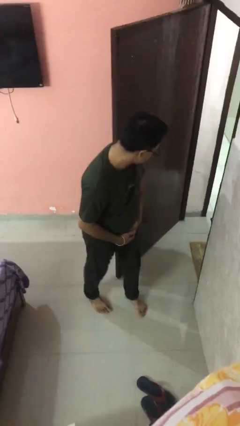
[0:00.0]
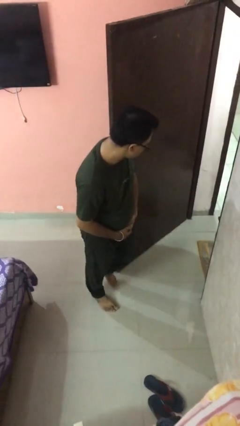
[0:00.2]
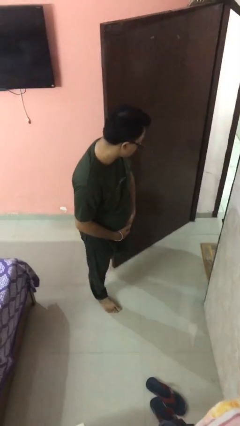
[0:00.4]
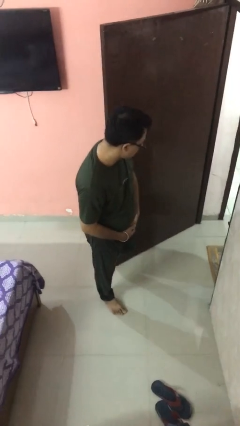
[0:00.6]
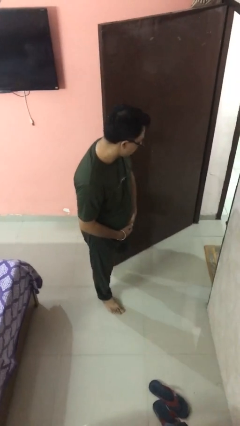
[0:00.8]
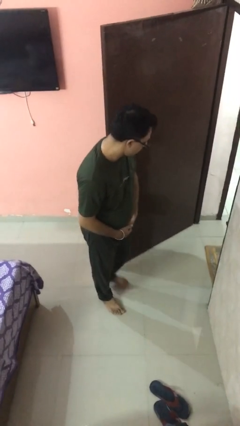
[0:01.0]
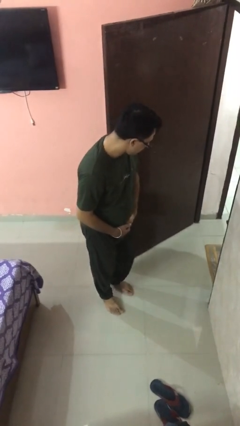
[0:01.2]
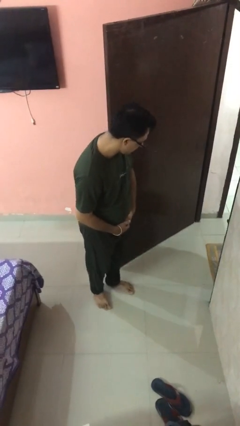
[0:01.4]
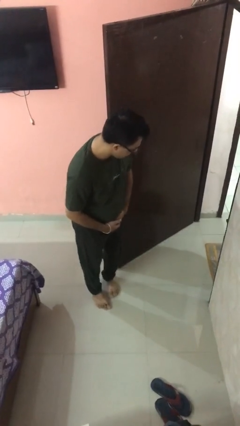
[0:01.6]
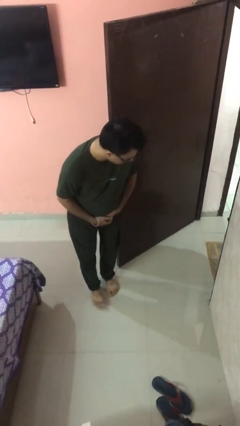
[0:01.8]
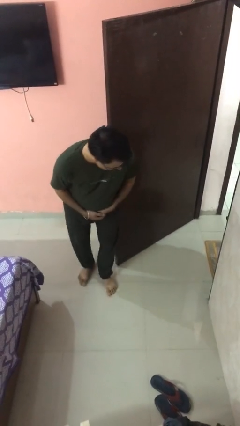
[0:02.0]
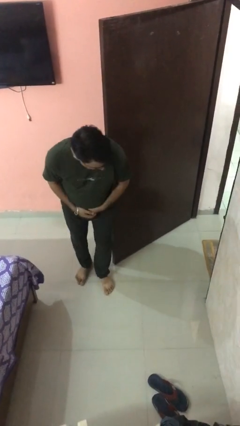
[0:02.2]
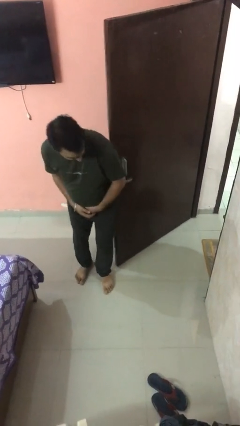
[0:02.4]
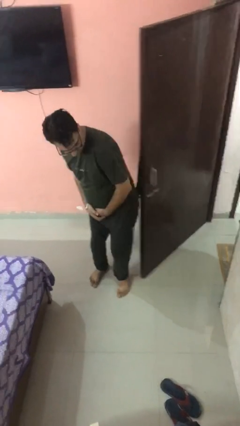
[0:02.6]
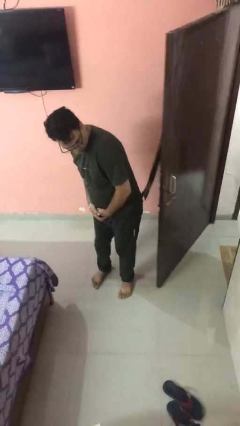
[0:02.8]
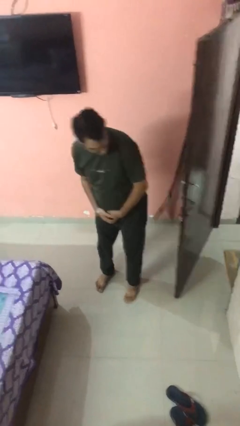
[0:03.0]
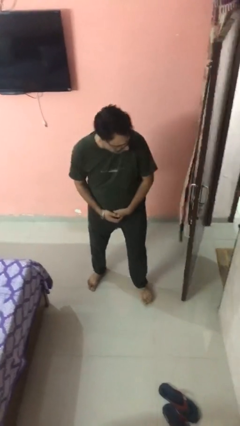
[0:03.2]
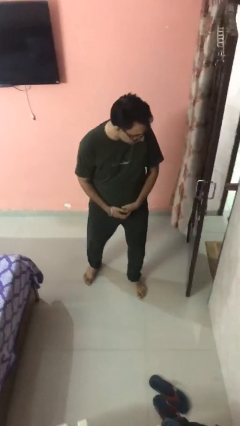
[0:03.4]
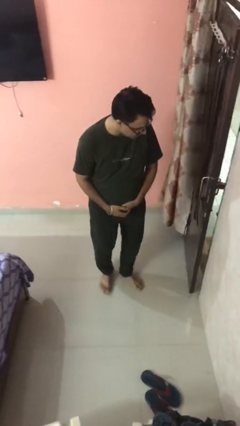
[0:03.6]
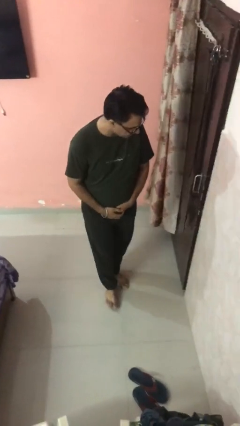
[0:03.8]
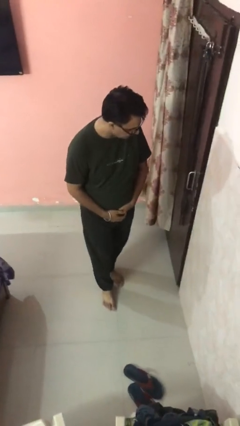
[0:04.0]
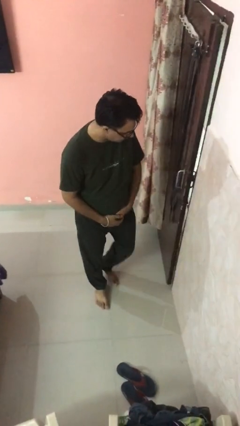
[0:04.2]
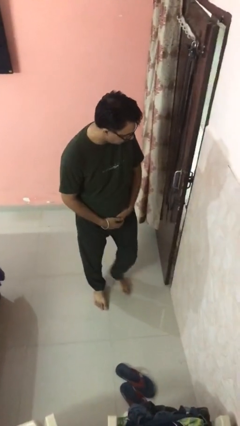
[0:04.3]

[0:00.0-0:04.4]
person closes door with hip

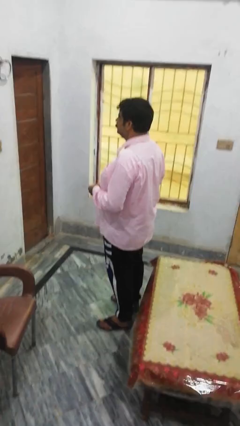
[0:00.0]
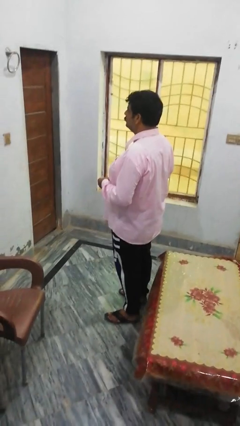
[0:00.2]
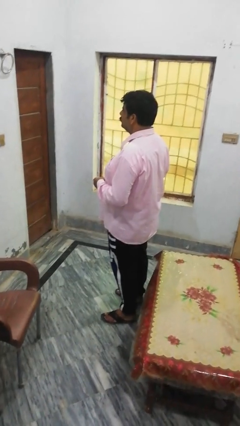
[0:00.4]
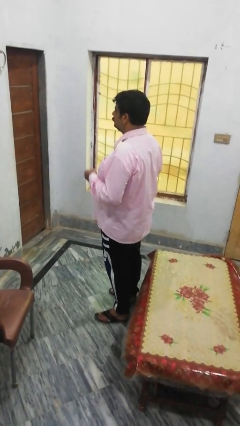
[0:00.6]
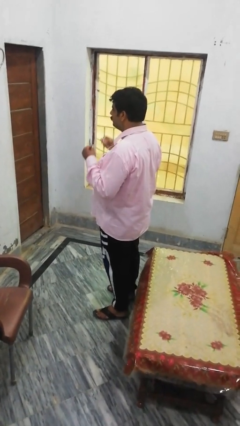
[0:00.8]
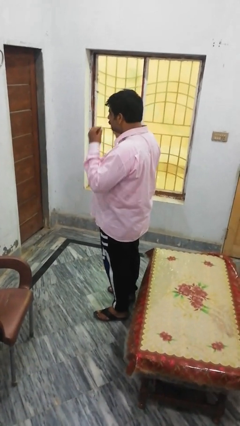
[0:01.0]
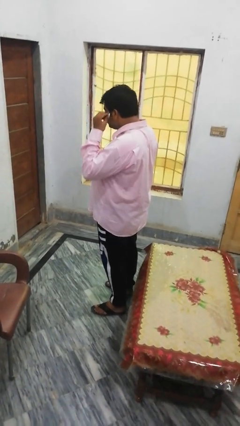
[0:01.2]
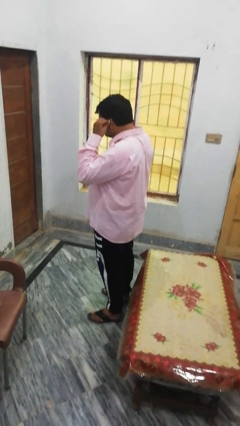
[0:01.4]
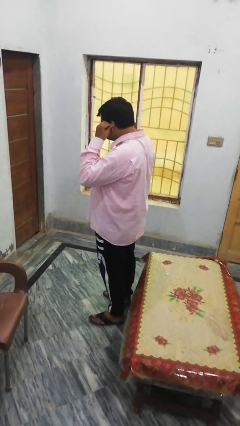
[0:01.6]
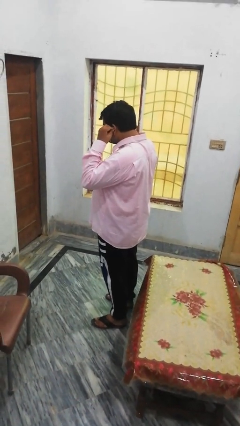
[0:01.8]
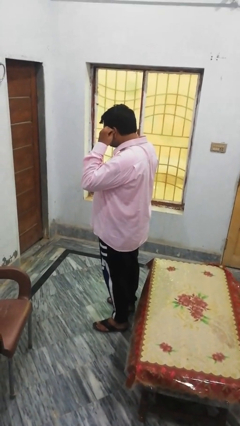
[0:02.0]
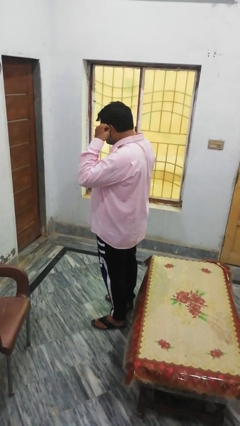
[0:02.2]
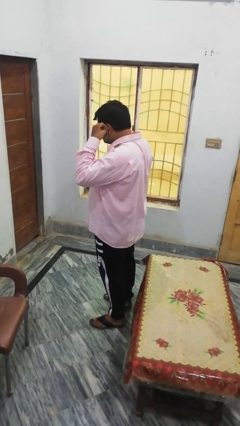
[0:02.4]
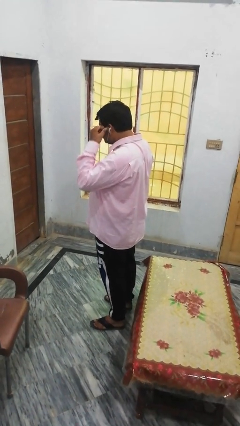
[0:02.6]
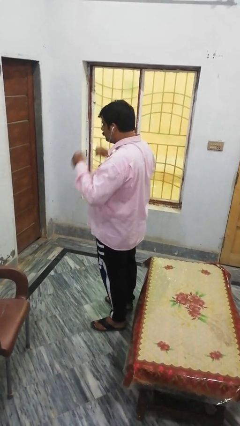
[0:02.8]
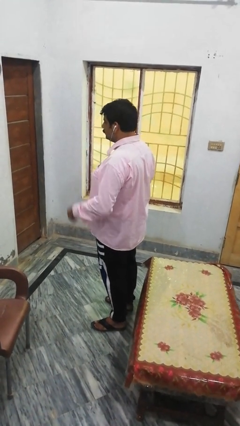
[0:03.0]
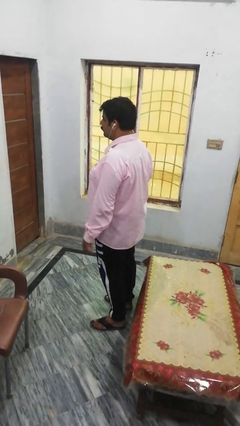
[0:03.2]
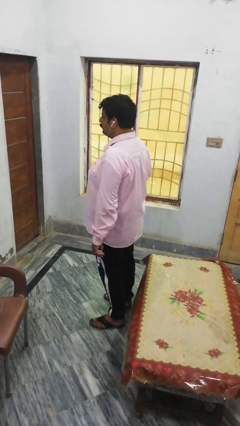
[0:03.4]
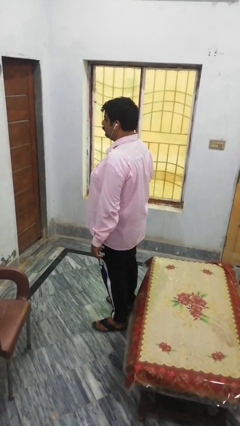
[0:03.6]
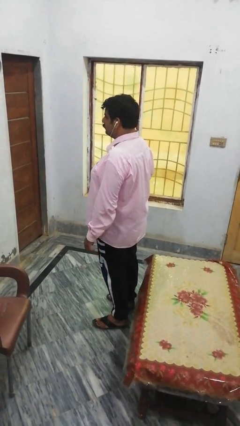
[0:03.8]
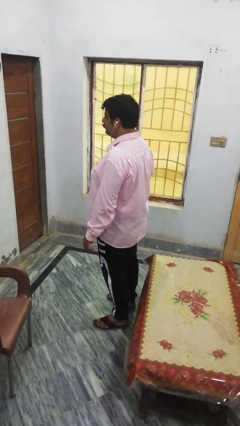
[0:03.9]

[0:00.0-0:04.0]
person puts on headphones

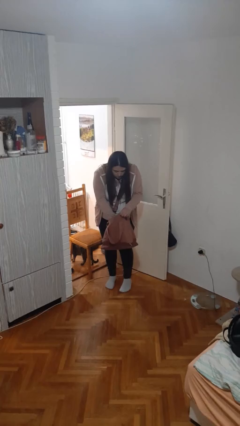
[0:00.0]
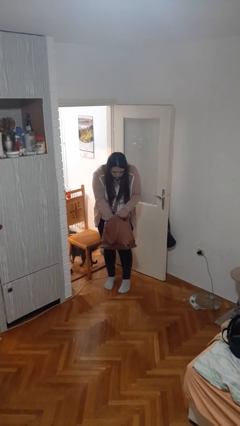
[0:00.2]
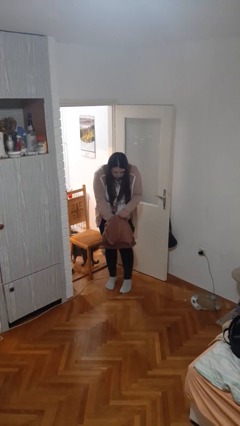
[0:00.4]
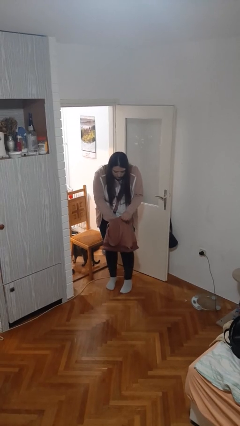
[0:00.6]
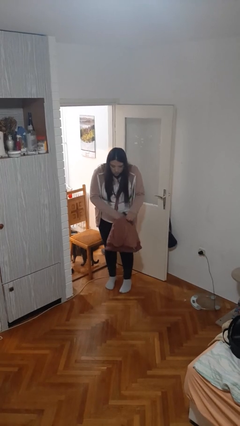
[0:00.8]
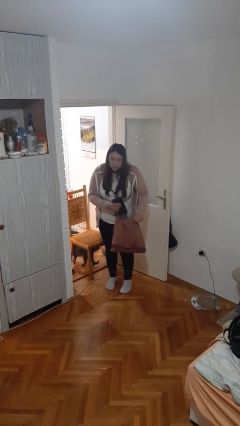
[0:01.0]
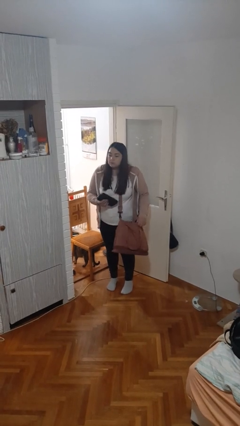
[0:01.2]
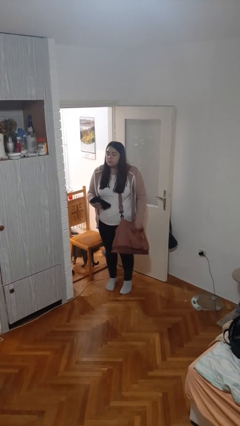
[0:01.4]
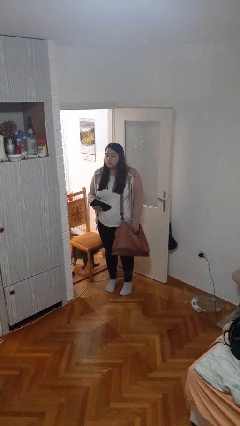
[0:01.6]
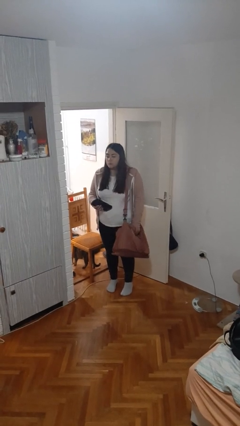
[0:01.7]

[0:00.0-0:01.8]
person takes object from purse

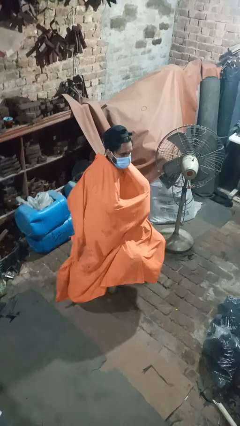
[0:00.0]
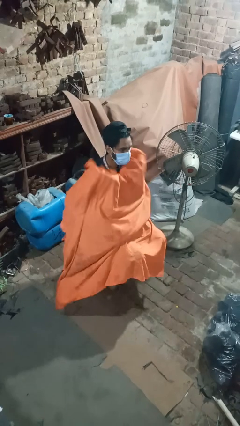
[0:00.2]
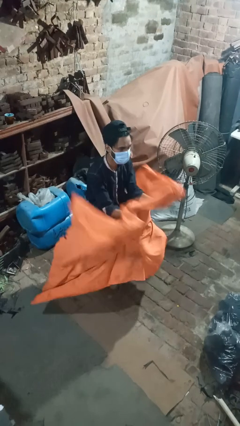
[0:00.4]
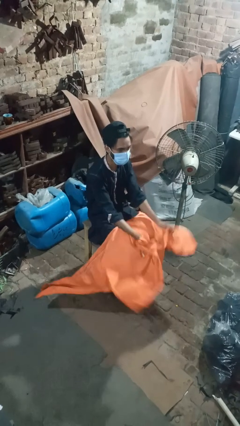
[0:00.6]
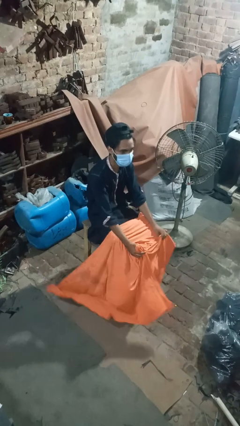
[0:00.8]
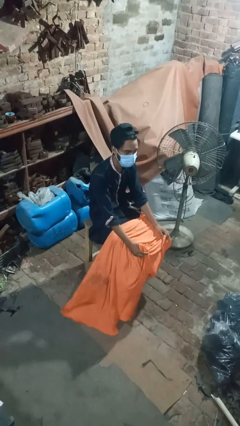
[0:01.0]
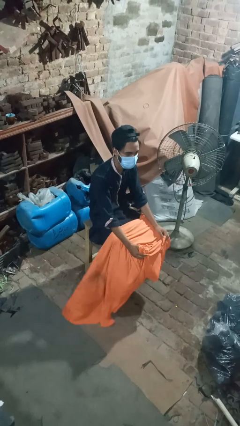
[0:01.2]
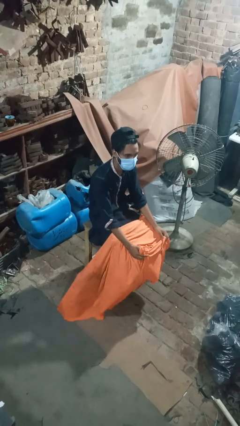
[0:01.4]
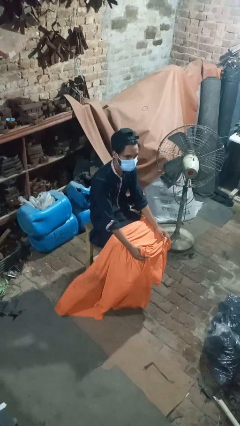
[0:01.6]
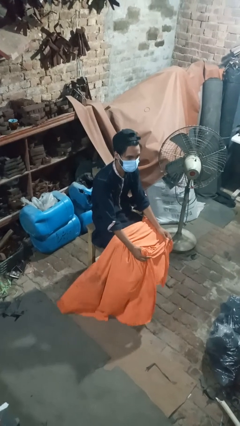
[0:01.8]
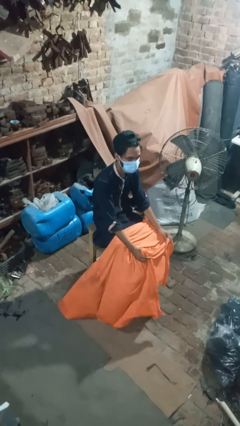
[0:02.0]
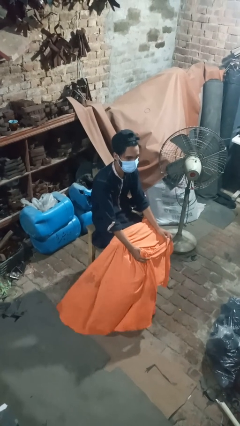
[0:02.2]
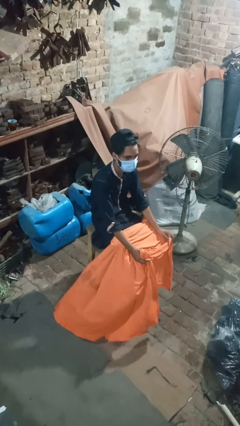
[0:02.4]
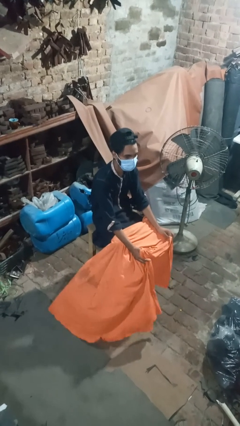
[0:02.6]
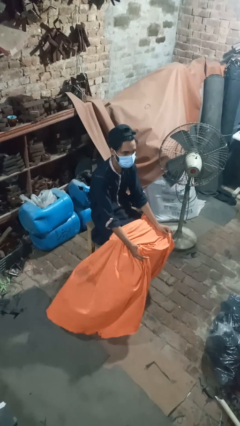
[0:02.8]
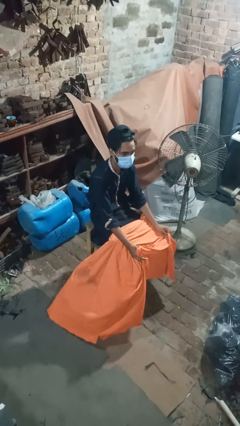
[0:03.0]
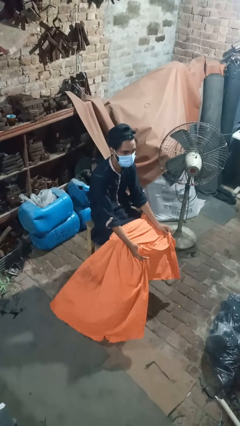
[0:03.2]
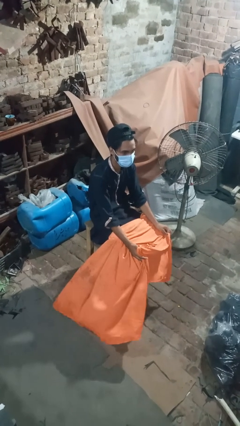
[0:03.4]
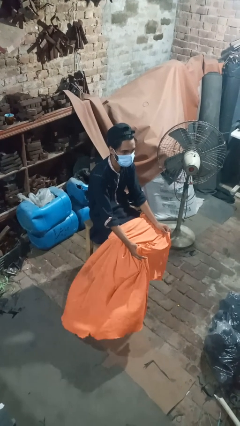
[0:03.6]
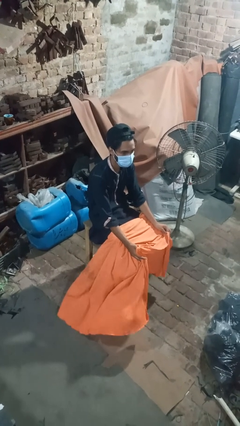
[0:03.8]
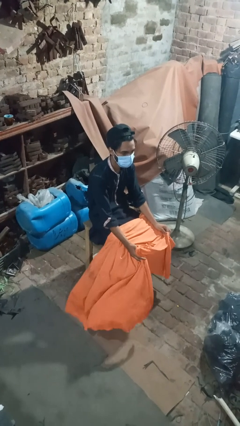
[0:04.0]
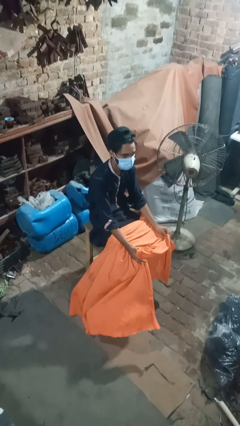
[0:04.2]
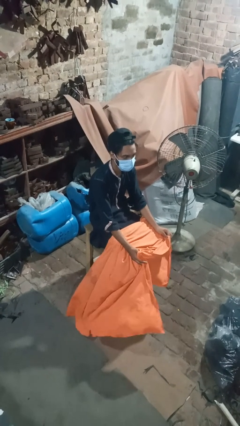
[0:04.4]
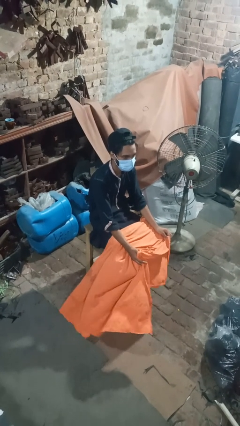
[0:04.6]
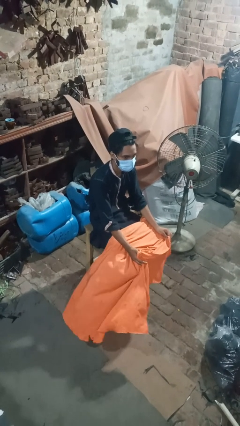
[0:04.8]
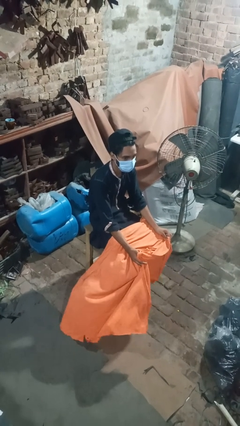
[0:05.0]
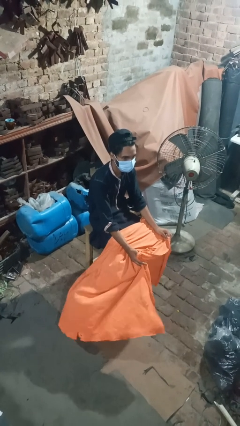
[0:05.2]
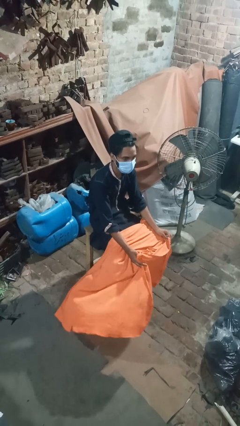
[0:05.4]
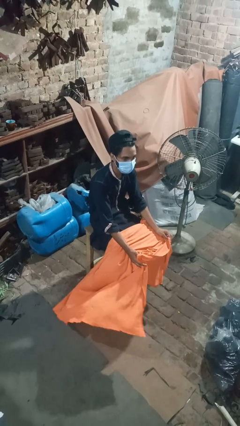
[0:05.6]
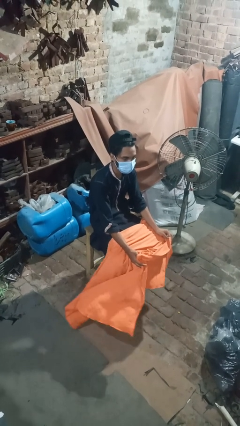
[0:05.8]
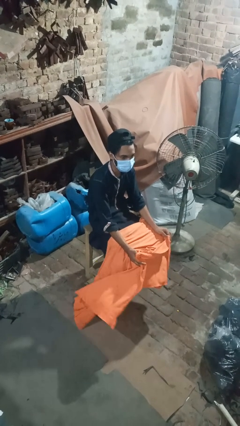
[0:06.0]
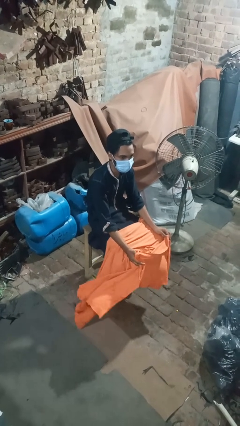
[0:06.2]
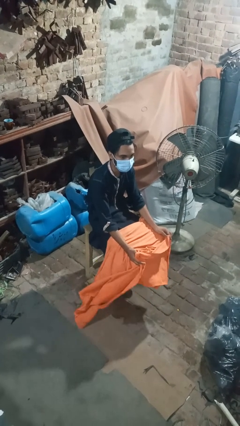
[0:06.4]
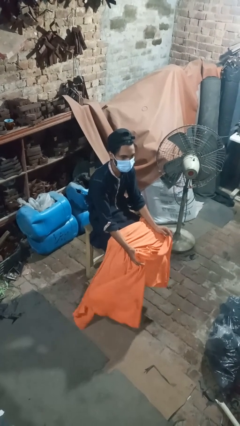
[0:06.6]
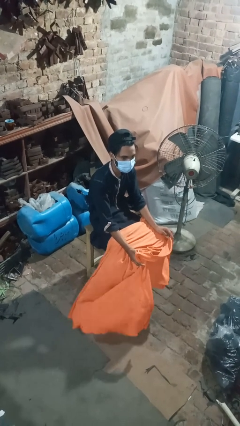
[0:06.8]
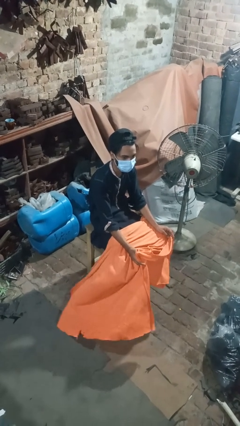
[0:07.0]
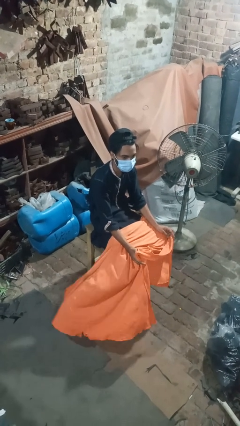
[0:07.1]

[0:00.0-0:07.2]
person uncovers with blanket

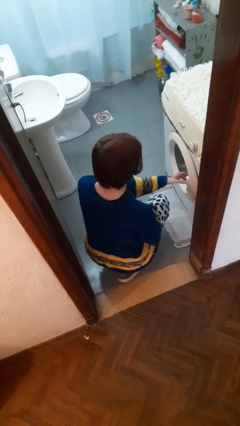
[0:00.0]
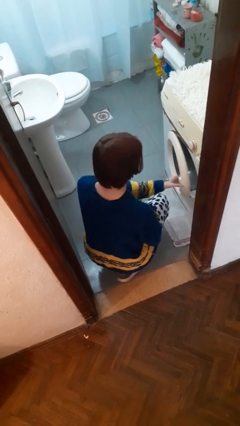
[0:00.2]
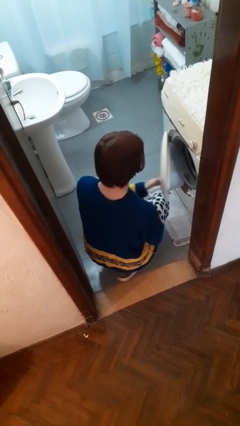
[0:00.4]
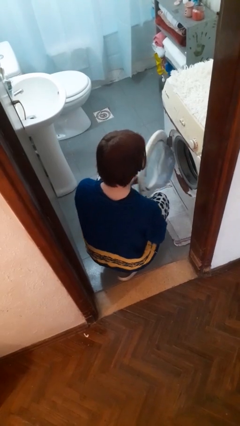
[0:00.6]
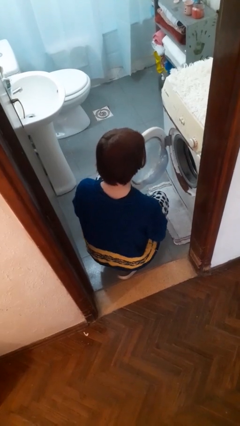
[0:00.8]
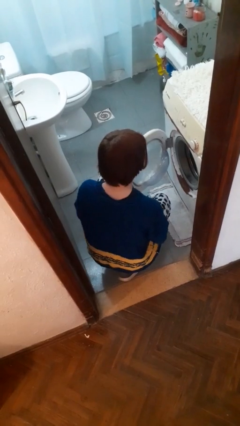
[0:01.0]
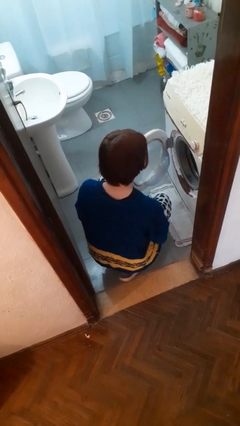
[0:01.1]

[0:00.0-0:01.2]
person opens clothes washer
